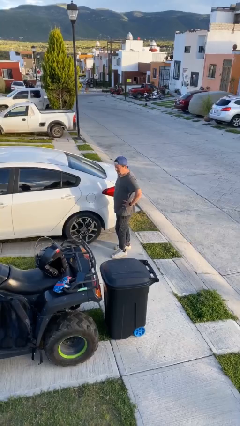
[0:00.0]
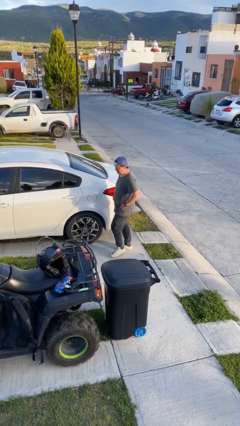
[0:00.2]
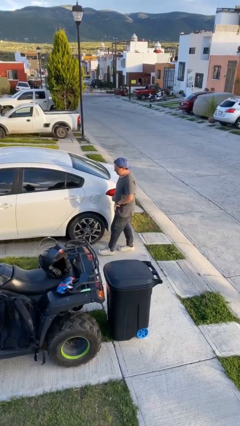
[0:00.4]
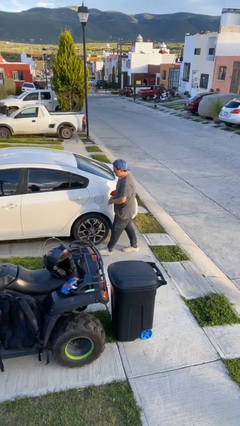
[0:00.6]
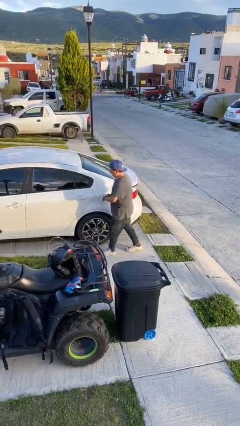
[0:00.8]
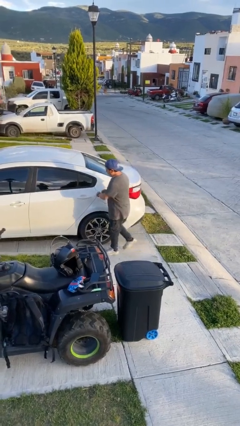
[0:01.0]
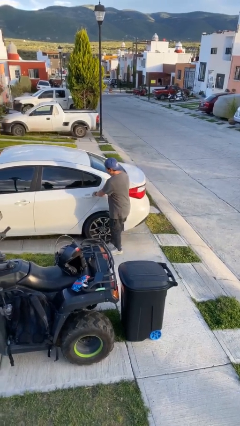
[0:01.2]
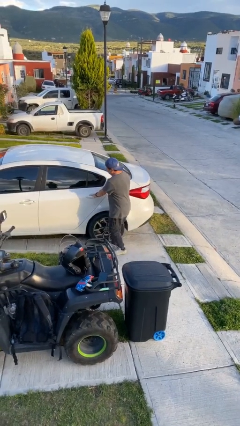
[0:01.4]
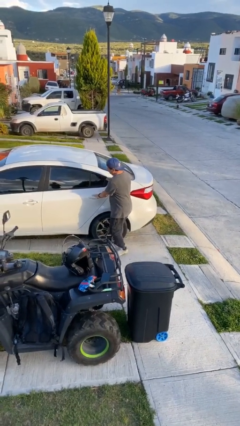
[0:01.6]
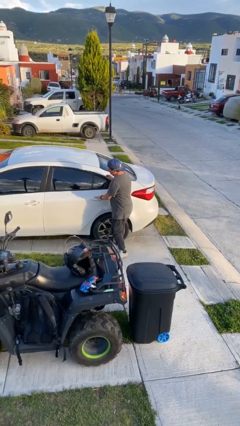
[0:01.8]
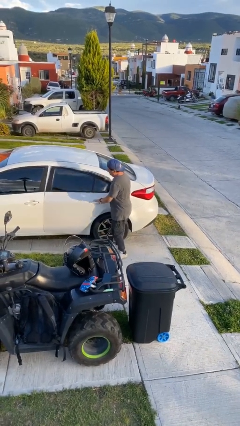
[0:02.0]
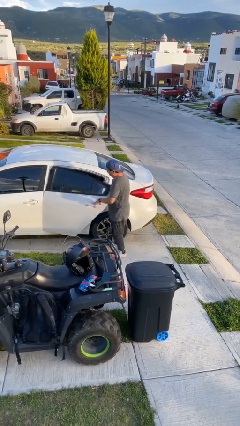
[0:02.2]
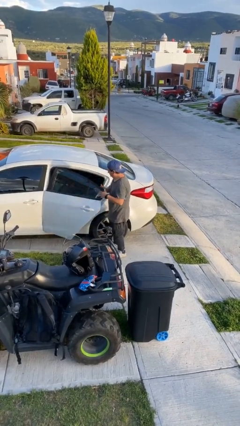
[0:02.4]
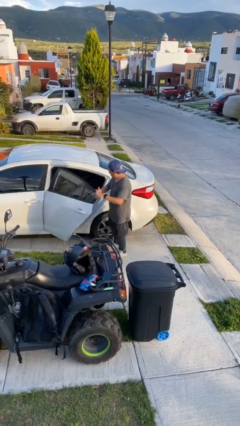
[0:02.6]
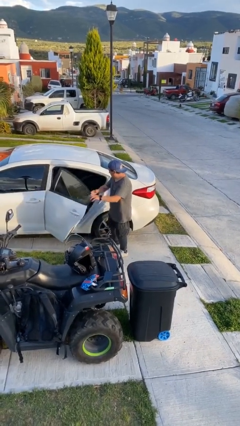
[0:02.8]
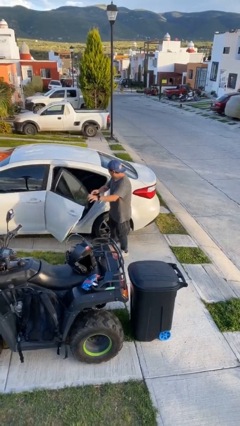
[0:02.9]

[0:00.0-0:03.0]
person opens car door

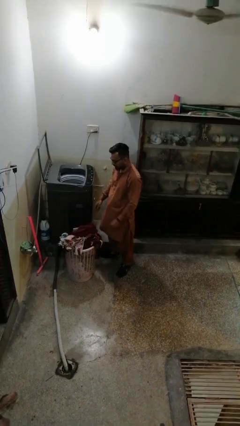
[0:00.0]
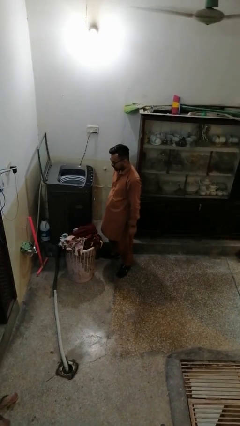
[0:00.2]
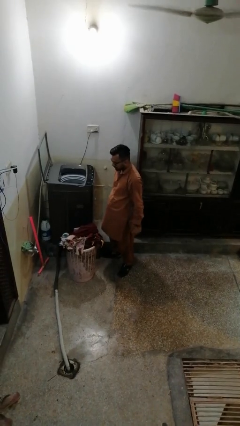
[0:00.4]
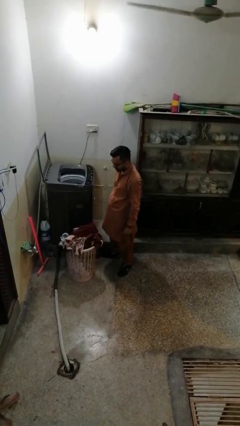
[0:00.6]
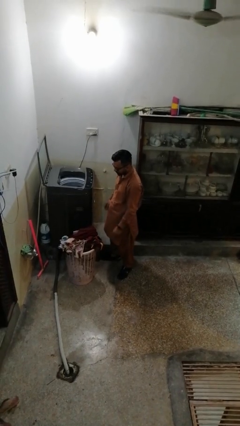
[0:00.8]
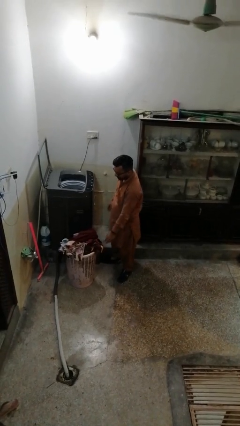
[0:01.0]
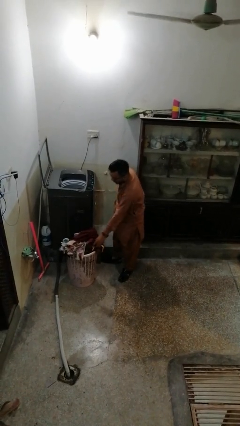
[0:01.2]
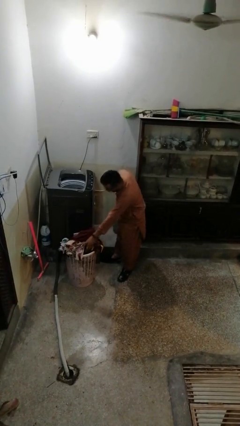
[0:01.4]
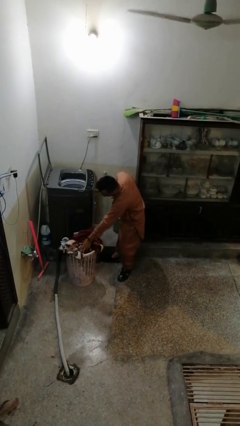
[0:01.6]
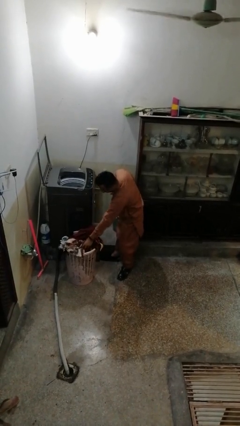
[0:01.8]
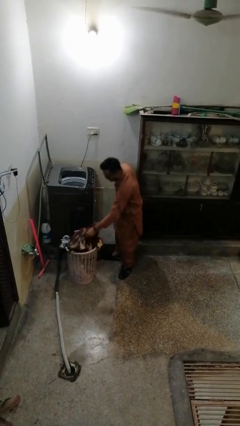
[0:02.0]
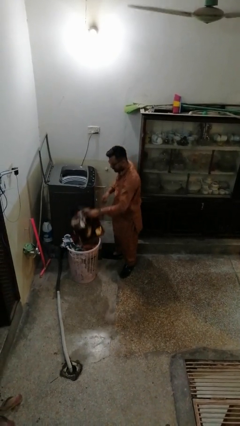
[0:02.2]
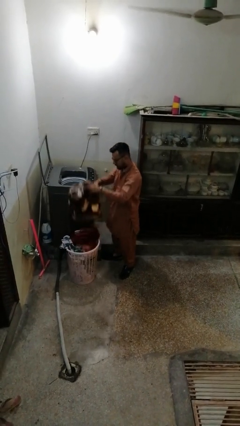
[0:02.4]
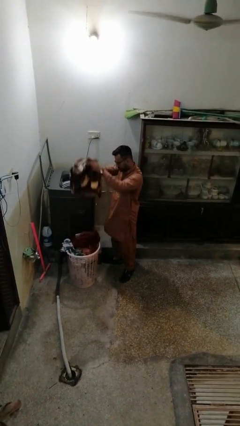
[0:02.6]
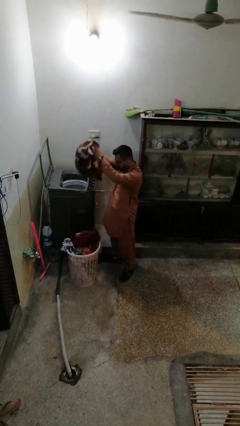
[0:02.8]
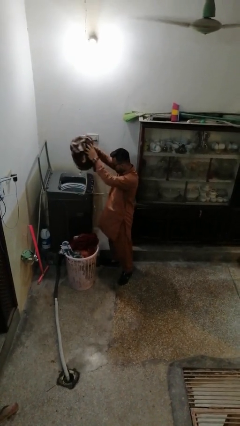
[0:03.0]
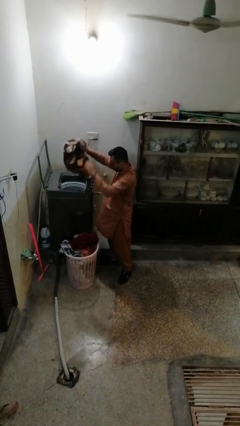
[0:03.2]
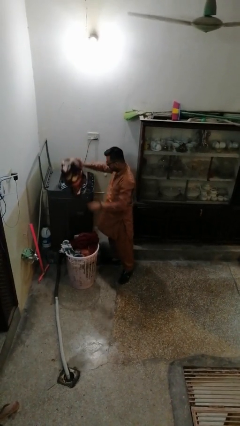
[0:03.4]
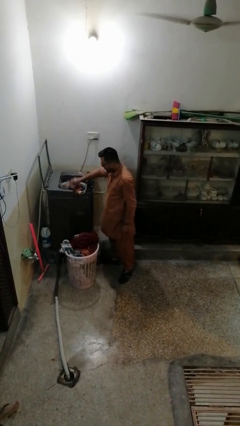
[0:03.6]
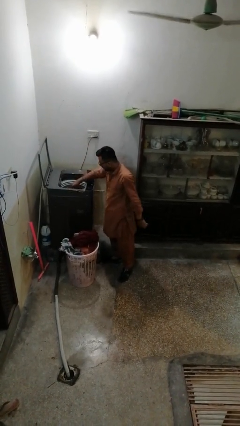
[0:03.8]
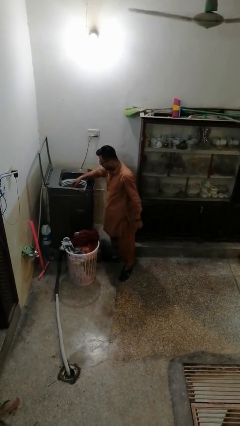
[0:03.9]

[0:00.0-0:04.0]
person loads dryer

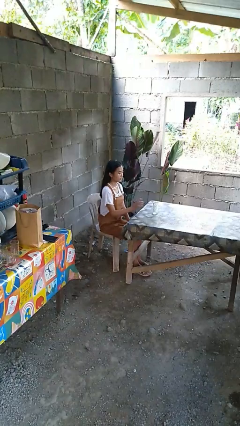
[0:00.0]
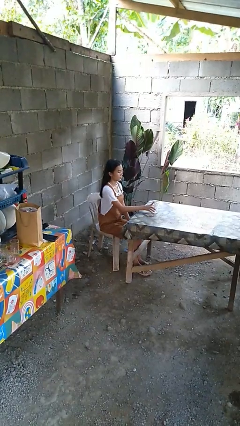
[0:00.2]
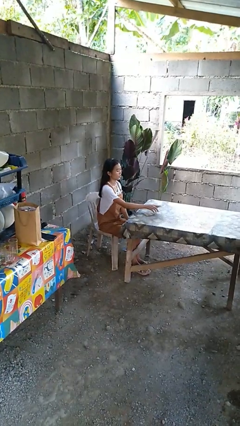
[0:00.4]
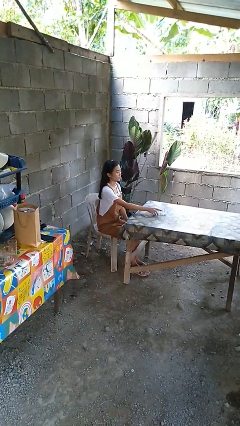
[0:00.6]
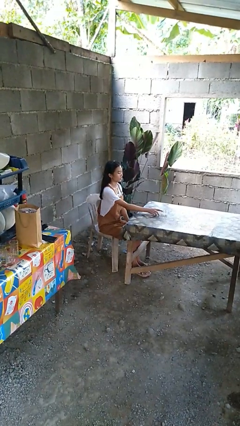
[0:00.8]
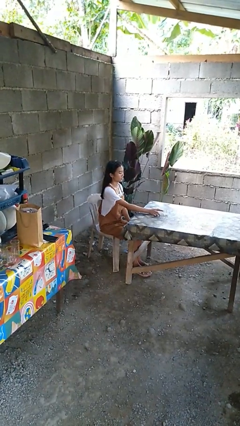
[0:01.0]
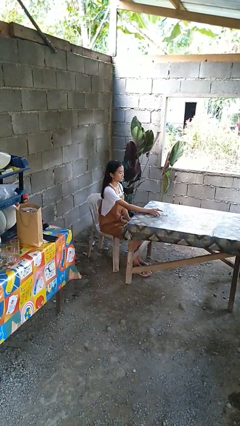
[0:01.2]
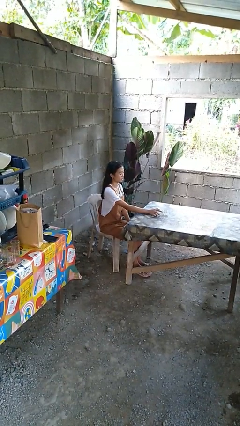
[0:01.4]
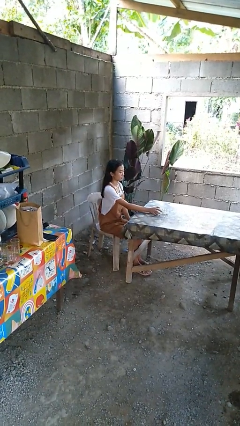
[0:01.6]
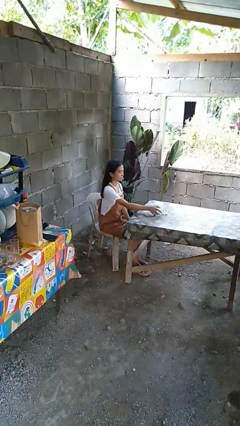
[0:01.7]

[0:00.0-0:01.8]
person knocks over glass

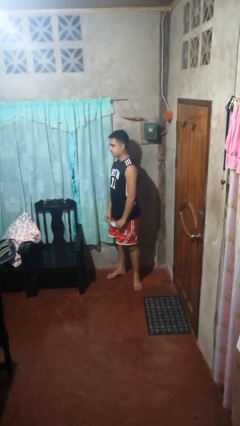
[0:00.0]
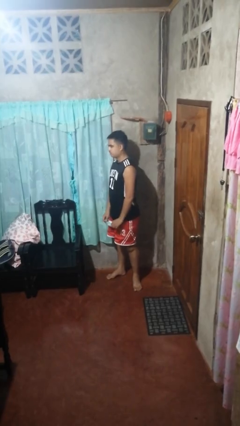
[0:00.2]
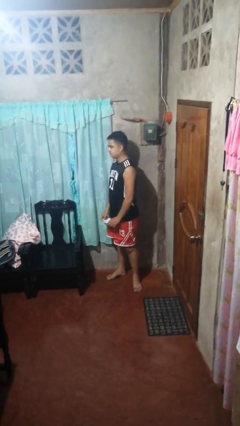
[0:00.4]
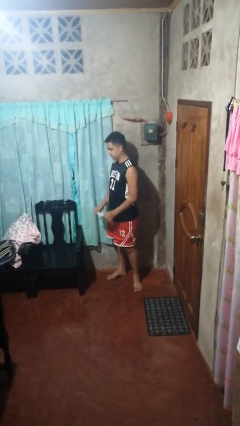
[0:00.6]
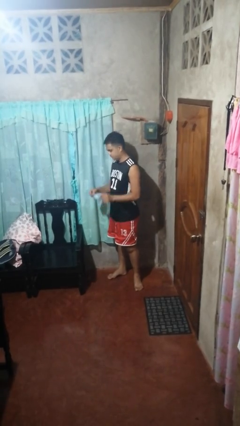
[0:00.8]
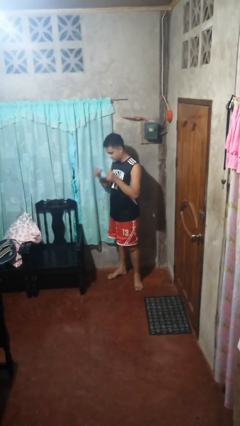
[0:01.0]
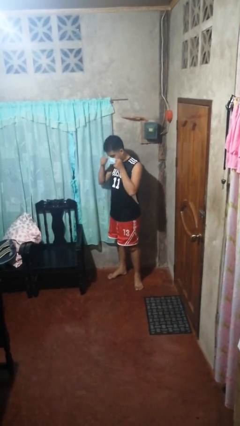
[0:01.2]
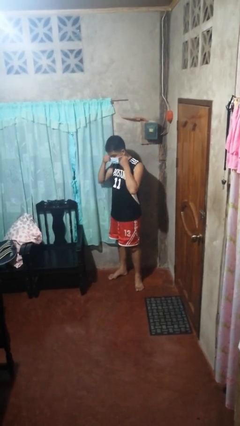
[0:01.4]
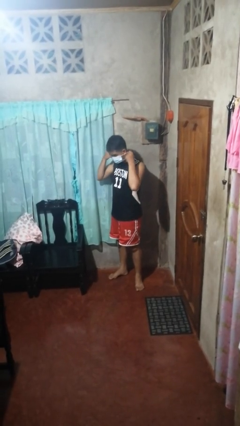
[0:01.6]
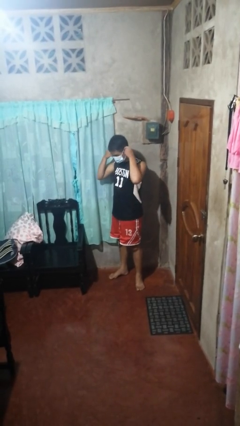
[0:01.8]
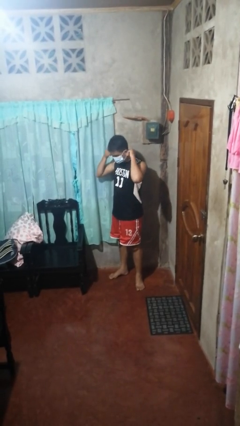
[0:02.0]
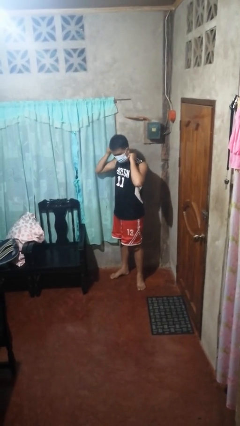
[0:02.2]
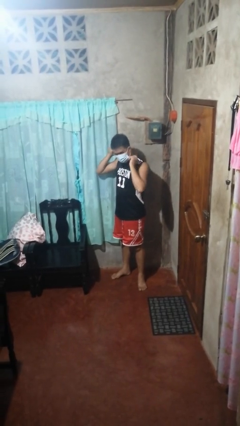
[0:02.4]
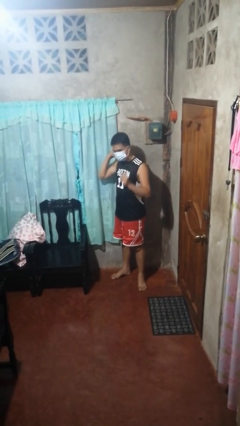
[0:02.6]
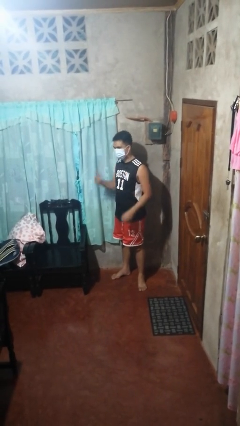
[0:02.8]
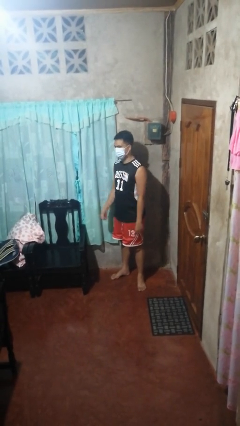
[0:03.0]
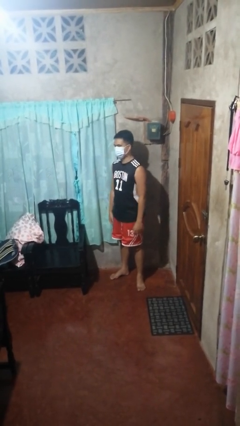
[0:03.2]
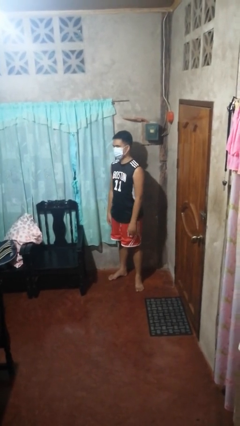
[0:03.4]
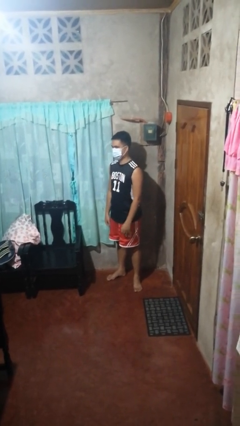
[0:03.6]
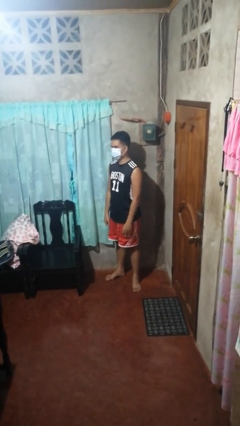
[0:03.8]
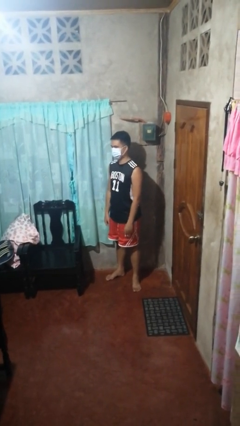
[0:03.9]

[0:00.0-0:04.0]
person puts on facemask

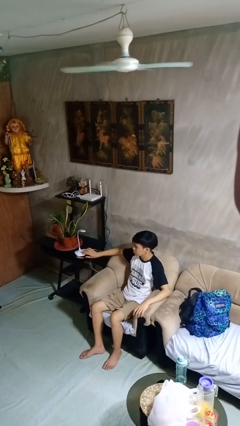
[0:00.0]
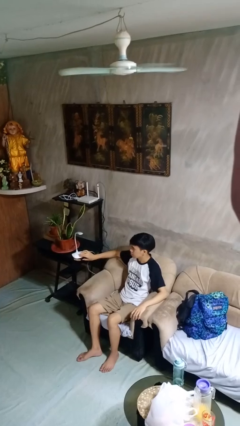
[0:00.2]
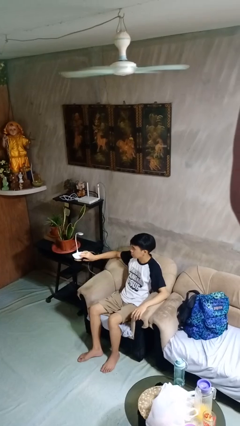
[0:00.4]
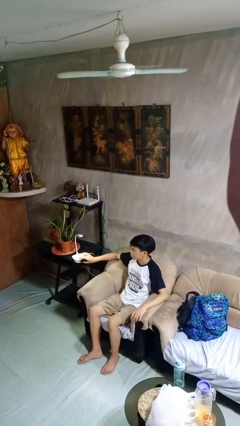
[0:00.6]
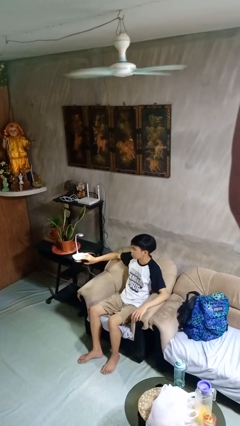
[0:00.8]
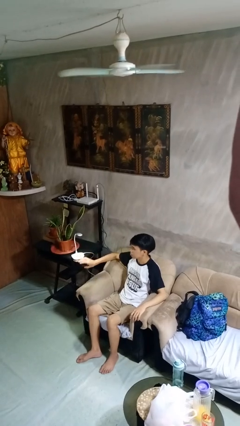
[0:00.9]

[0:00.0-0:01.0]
person turns on lamp

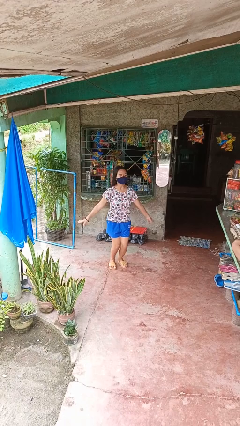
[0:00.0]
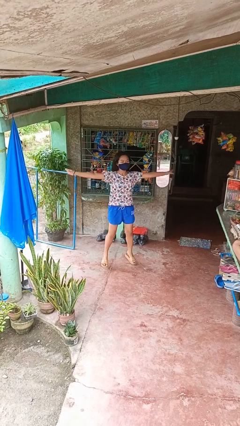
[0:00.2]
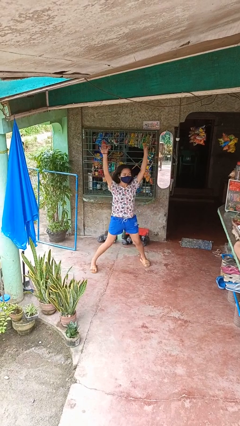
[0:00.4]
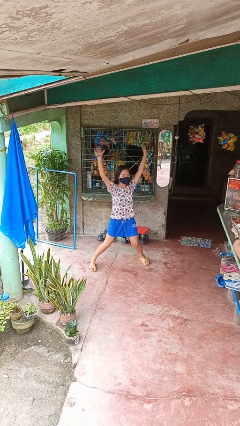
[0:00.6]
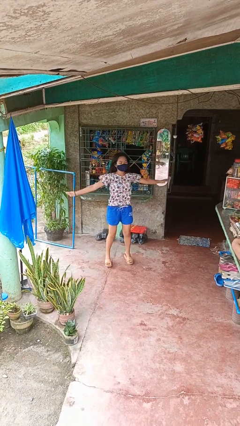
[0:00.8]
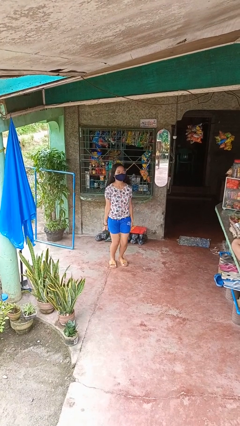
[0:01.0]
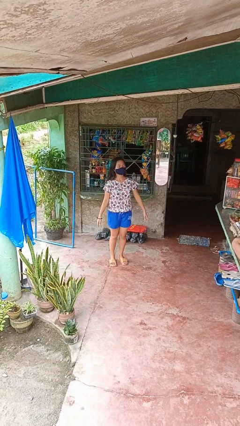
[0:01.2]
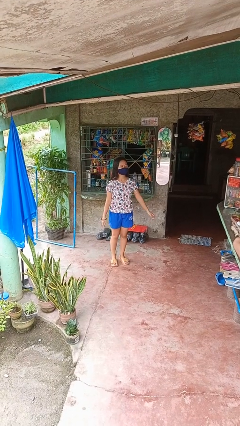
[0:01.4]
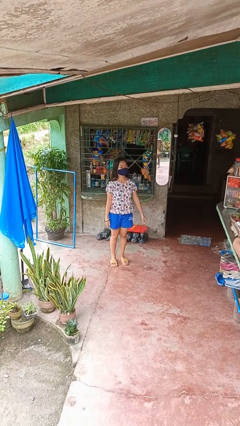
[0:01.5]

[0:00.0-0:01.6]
person exercises with jumping jacks

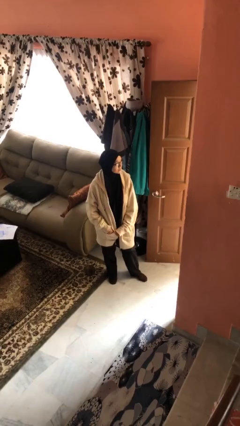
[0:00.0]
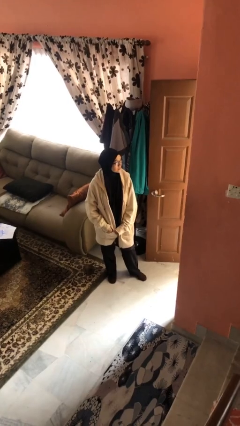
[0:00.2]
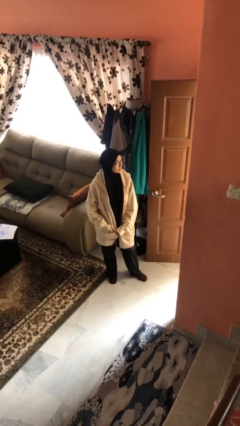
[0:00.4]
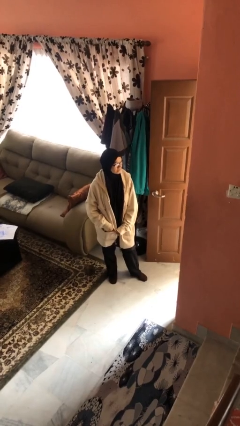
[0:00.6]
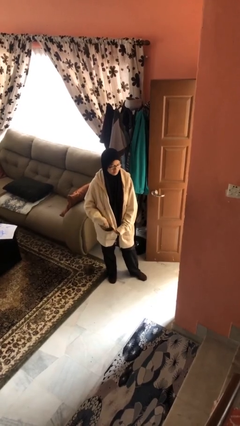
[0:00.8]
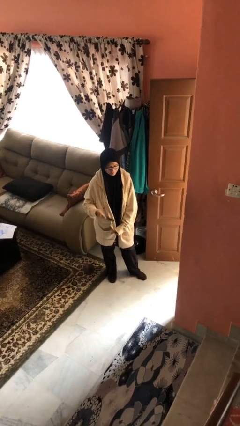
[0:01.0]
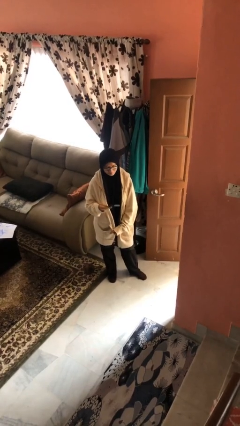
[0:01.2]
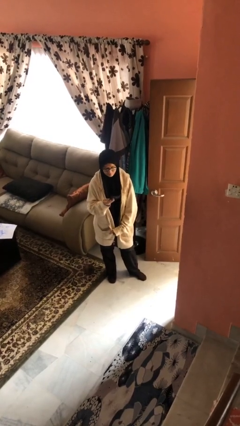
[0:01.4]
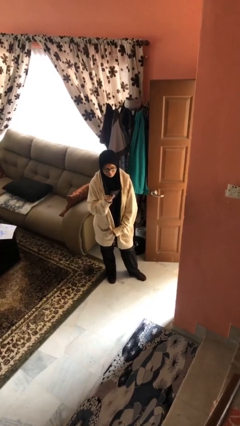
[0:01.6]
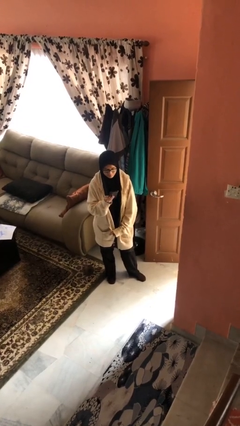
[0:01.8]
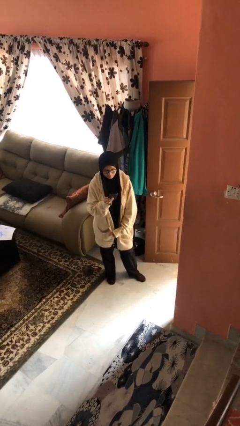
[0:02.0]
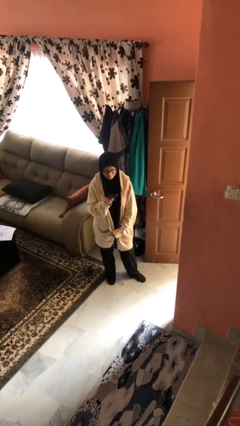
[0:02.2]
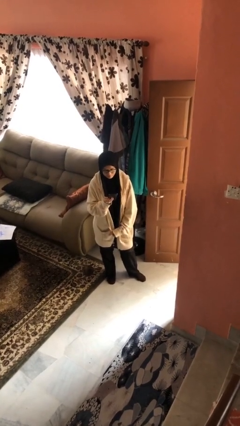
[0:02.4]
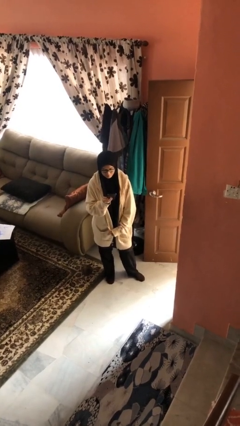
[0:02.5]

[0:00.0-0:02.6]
person takes phone from pocket
